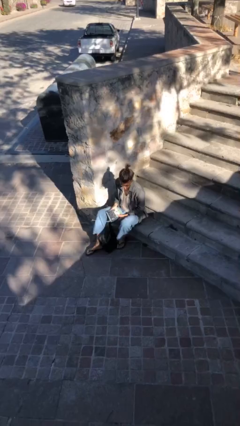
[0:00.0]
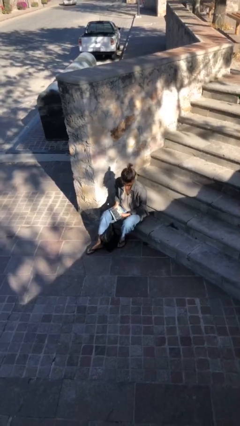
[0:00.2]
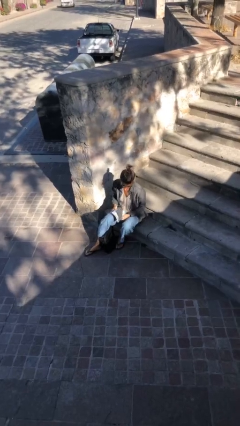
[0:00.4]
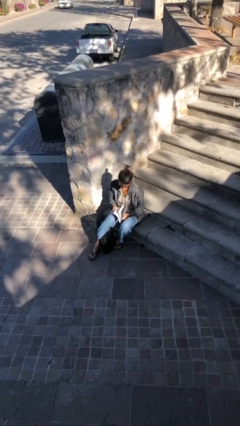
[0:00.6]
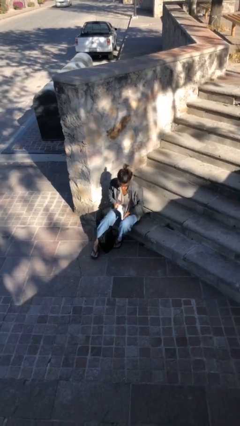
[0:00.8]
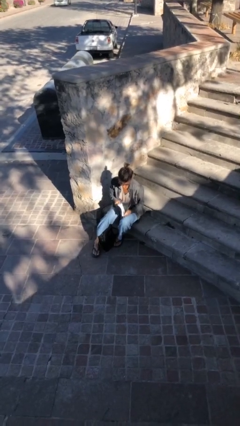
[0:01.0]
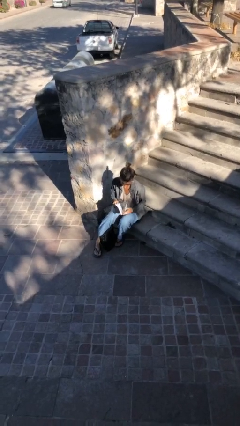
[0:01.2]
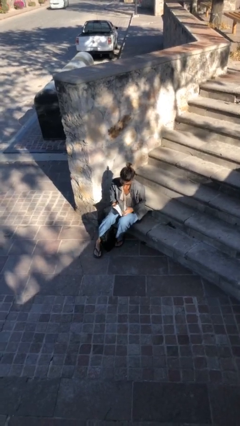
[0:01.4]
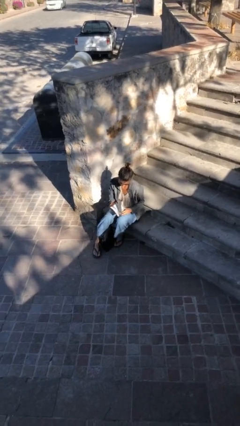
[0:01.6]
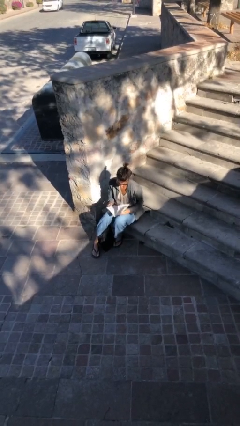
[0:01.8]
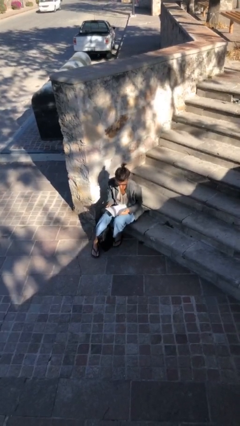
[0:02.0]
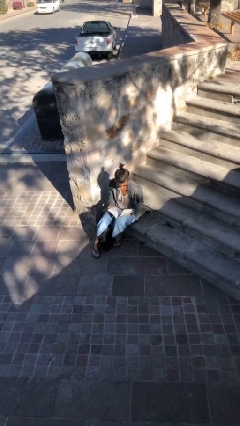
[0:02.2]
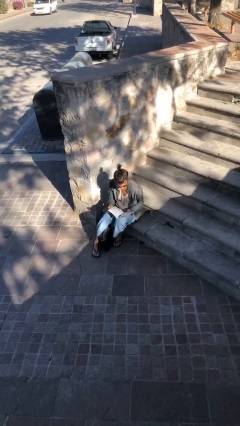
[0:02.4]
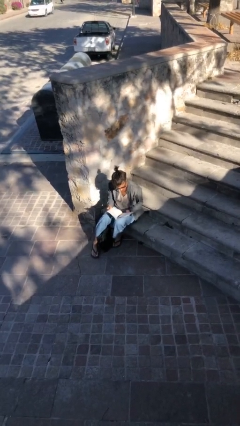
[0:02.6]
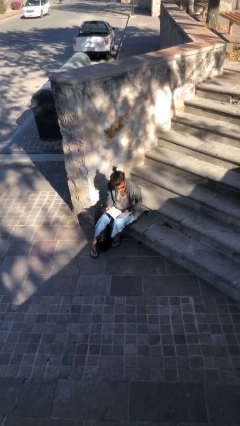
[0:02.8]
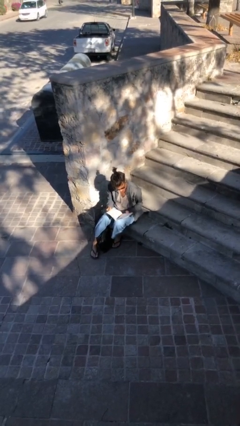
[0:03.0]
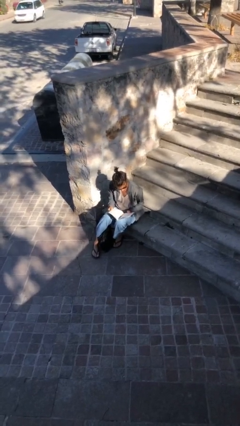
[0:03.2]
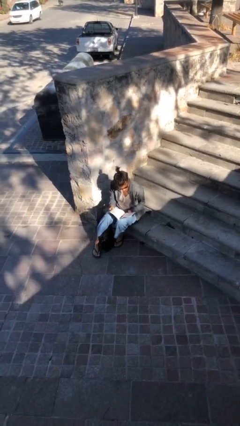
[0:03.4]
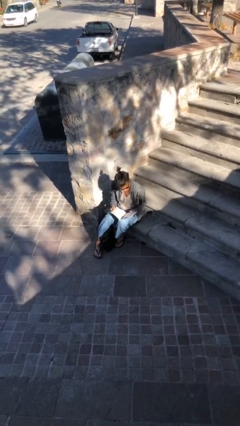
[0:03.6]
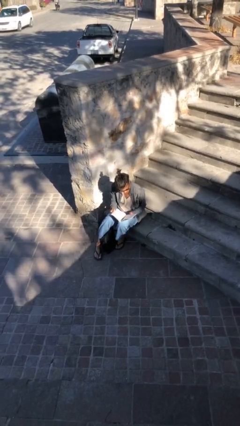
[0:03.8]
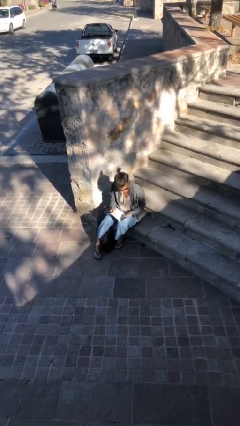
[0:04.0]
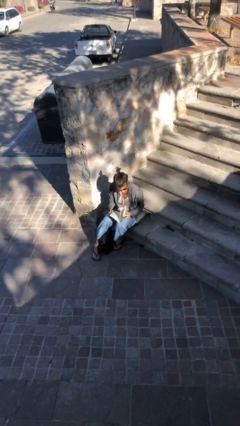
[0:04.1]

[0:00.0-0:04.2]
person reads document

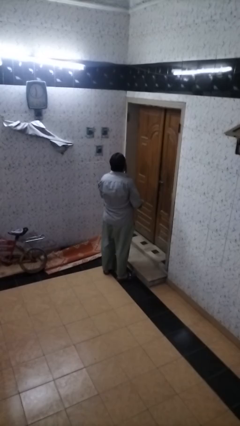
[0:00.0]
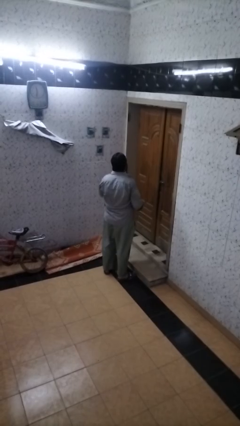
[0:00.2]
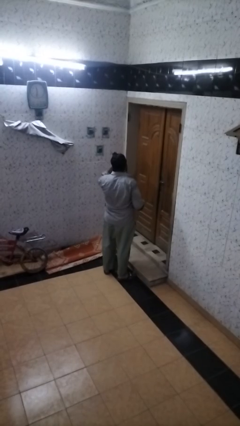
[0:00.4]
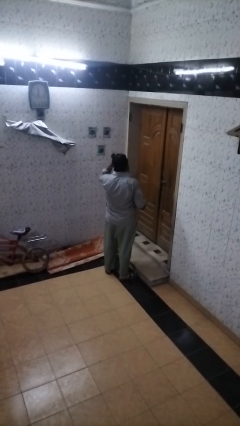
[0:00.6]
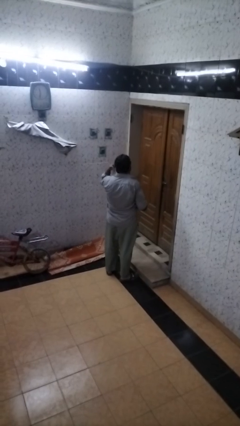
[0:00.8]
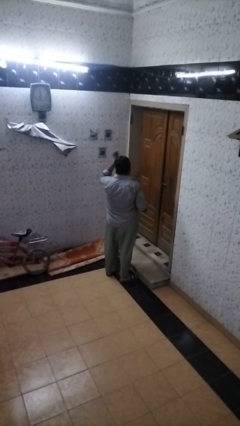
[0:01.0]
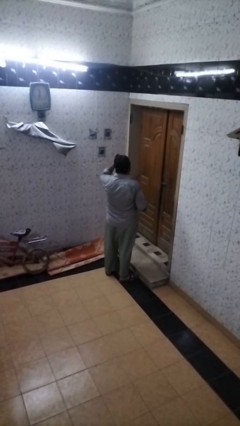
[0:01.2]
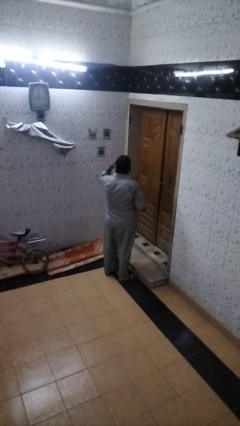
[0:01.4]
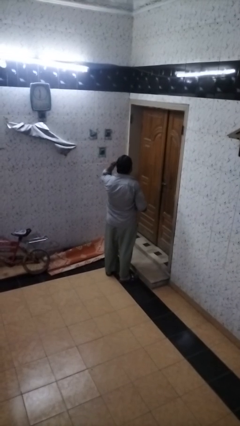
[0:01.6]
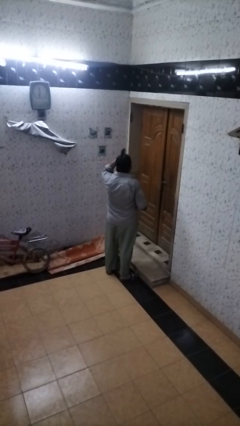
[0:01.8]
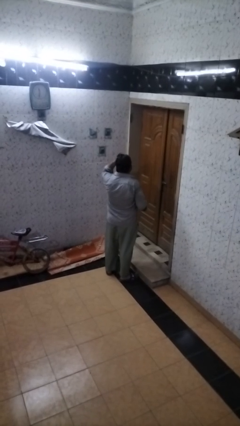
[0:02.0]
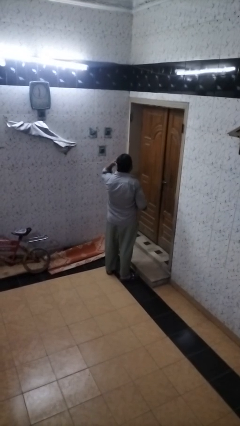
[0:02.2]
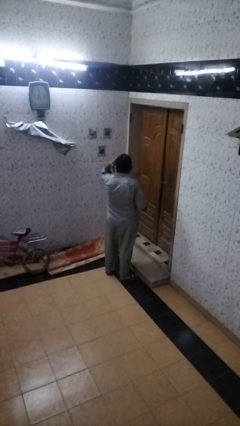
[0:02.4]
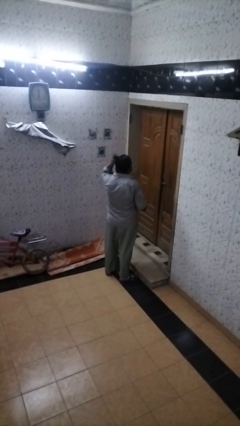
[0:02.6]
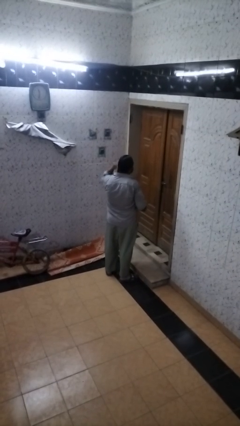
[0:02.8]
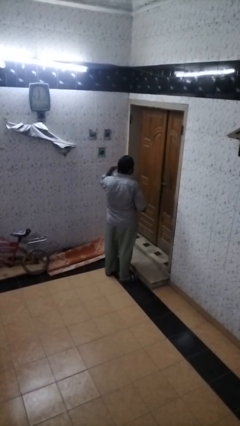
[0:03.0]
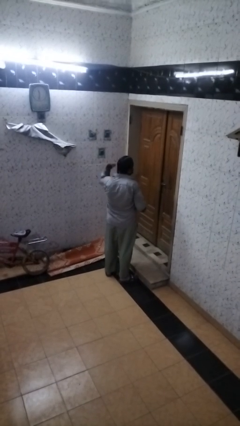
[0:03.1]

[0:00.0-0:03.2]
person brushes hair

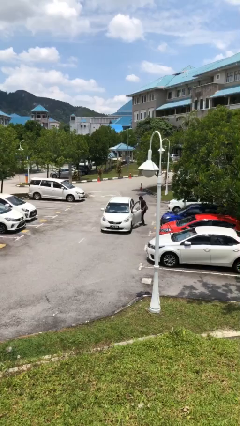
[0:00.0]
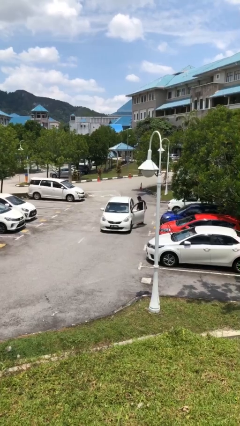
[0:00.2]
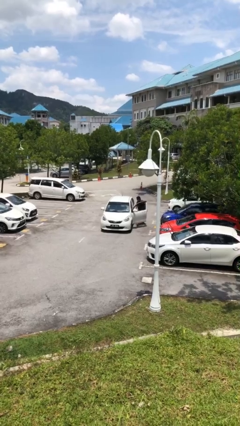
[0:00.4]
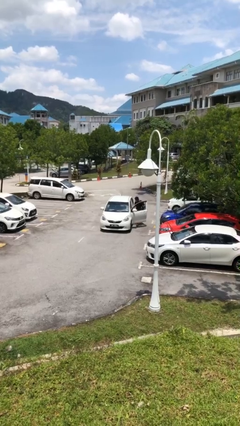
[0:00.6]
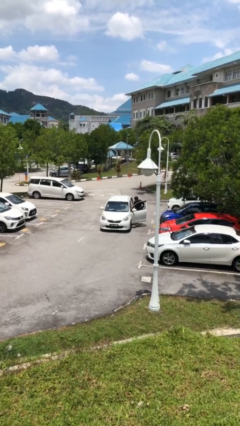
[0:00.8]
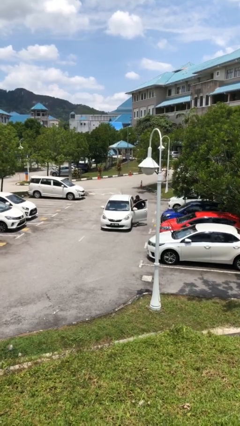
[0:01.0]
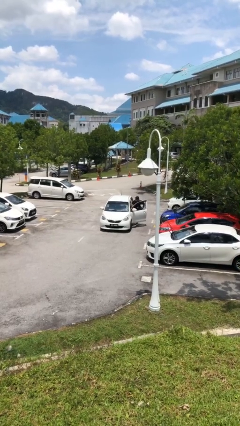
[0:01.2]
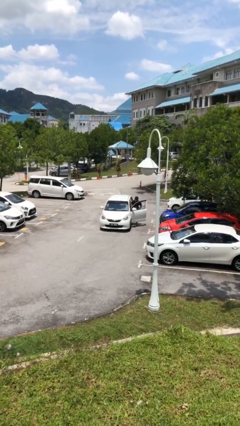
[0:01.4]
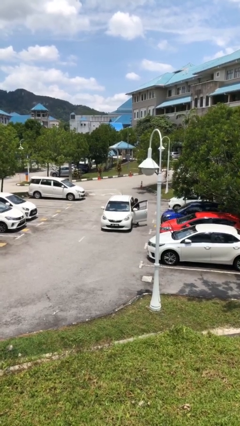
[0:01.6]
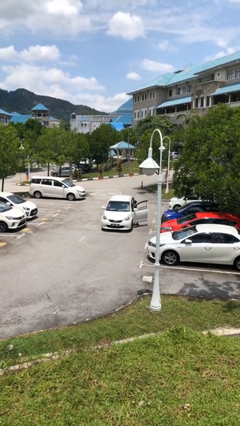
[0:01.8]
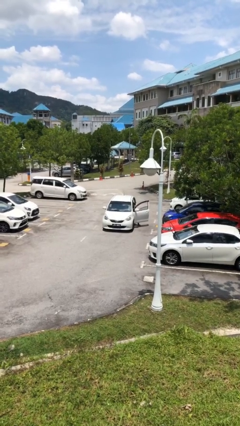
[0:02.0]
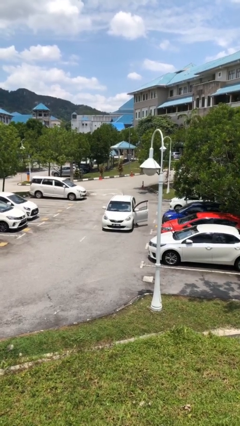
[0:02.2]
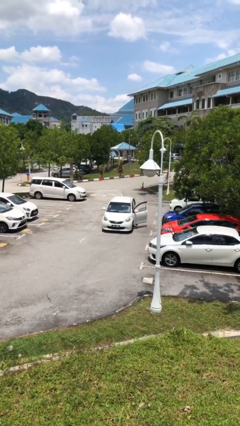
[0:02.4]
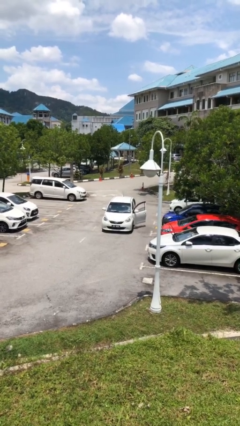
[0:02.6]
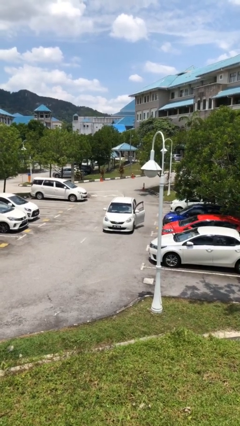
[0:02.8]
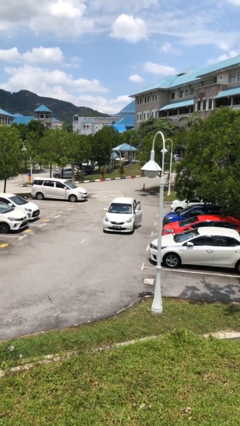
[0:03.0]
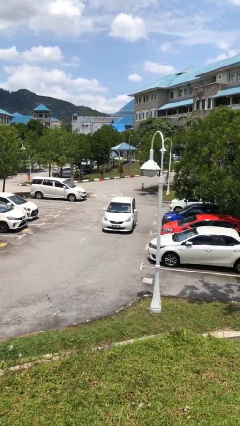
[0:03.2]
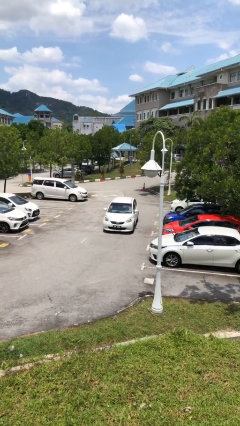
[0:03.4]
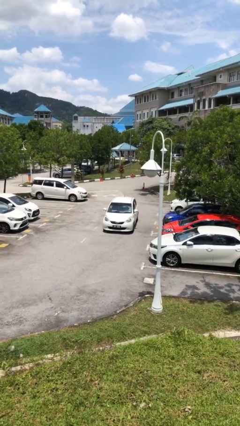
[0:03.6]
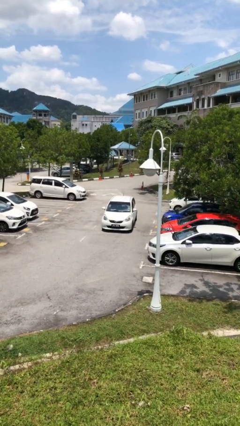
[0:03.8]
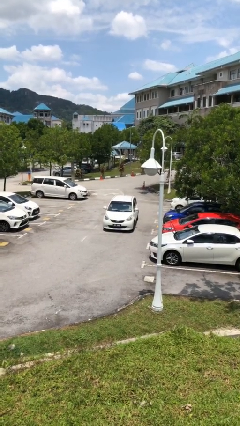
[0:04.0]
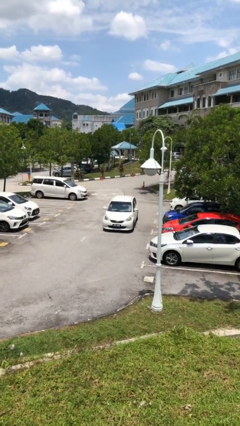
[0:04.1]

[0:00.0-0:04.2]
car picks up person

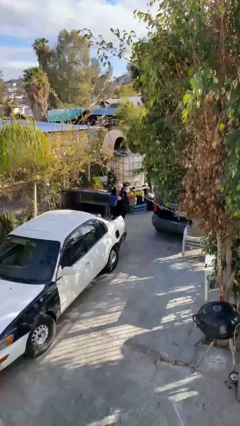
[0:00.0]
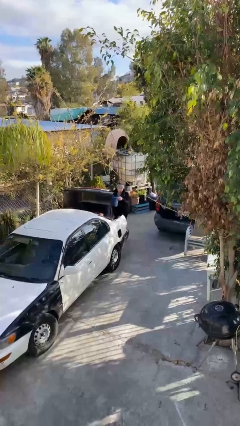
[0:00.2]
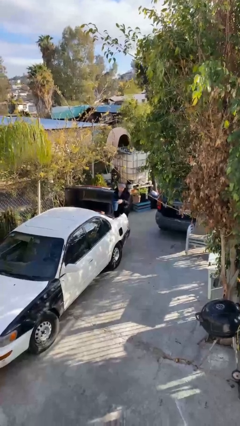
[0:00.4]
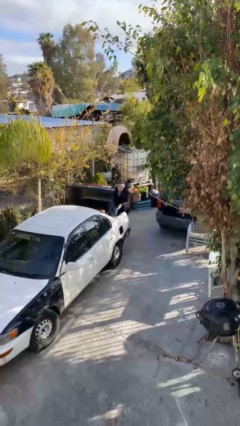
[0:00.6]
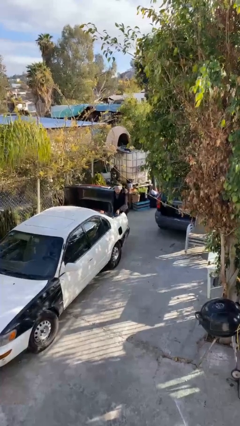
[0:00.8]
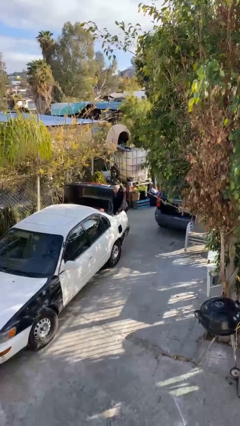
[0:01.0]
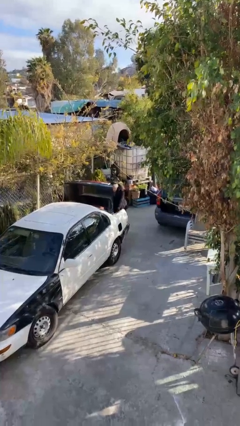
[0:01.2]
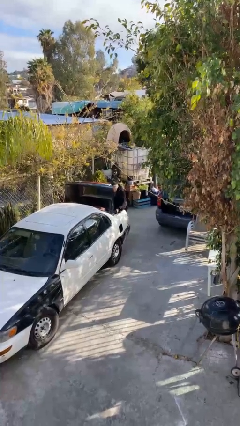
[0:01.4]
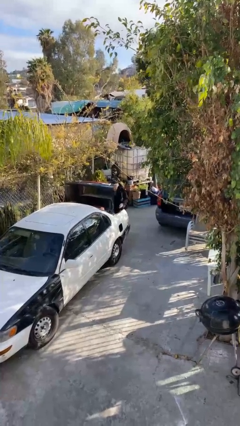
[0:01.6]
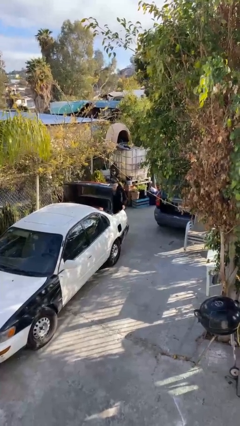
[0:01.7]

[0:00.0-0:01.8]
person loads car

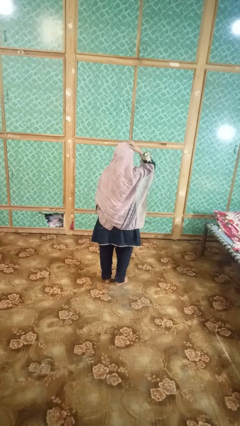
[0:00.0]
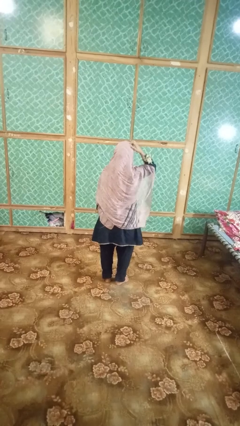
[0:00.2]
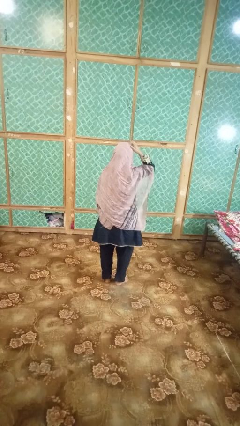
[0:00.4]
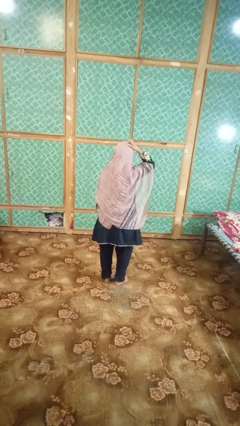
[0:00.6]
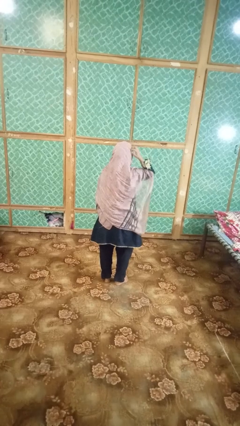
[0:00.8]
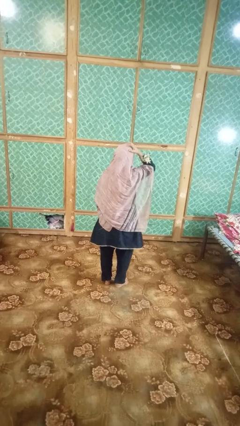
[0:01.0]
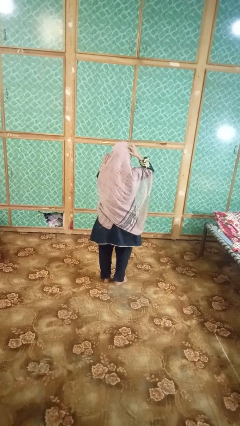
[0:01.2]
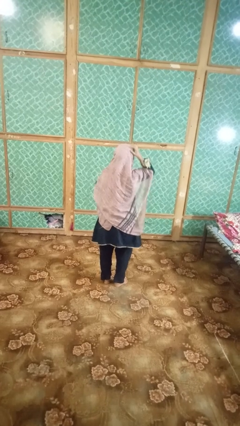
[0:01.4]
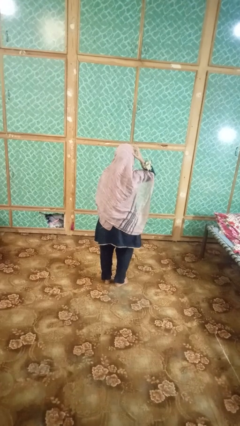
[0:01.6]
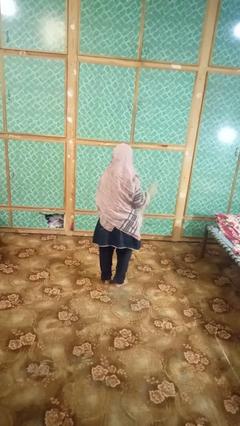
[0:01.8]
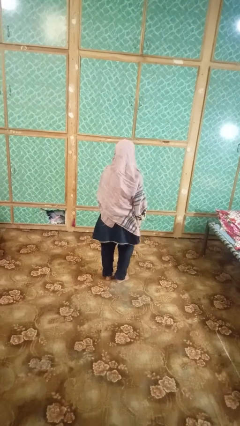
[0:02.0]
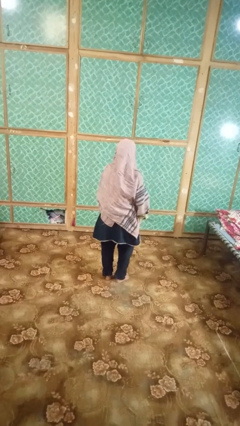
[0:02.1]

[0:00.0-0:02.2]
person strokes hair

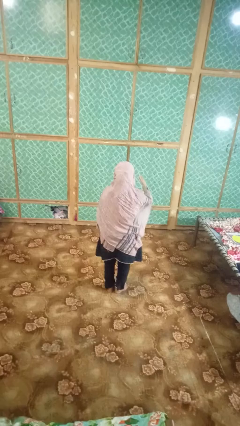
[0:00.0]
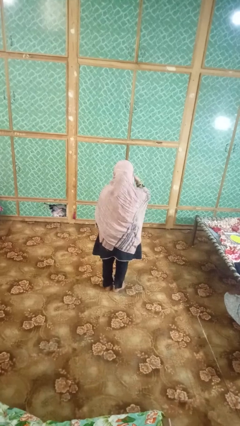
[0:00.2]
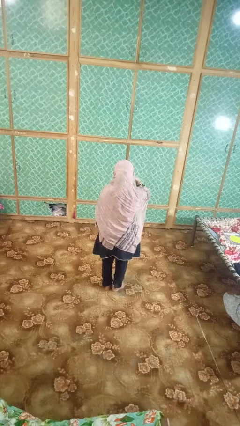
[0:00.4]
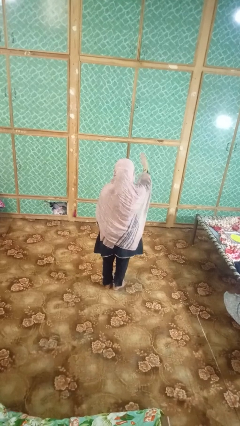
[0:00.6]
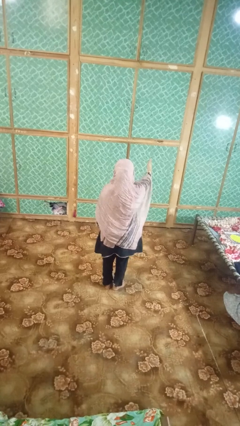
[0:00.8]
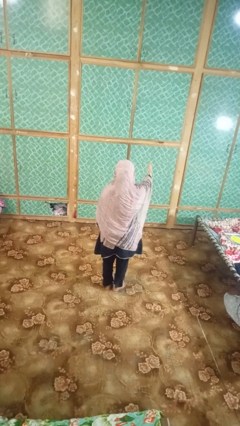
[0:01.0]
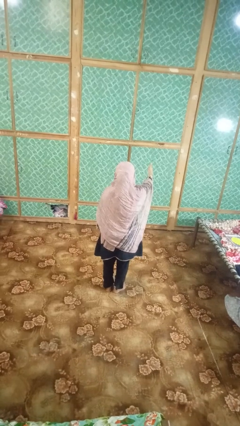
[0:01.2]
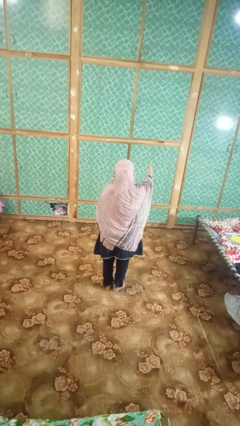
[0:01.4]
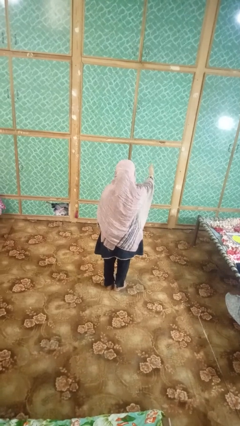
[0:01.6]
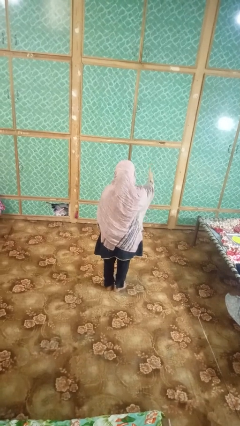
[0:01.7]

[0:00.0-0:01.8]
person gestures blow kiss
